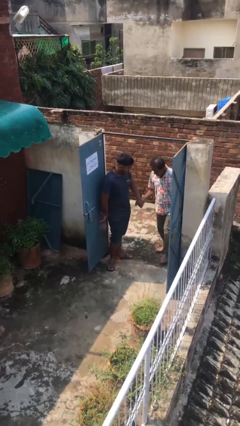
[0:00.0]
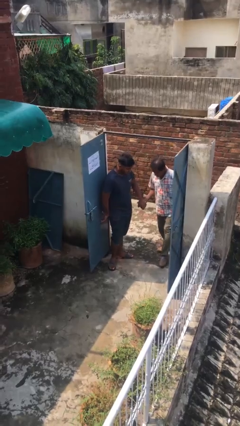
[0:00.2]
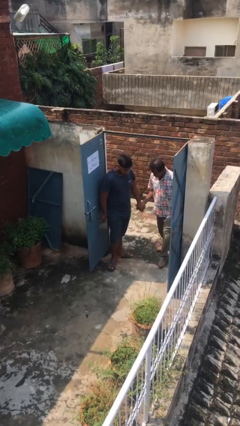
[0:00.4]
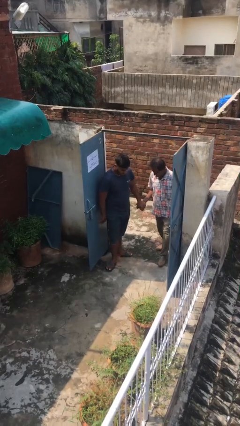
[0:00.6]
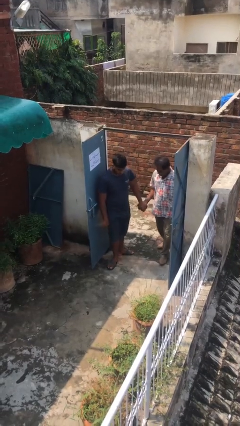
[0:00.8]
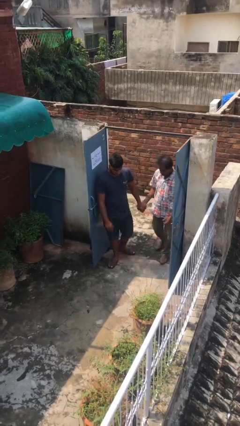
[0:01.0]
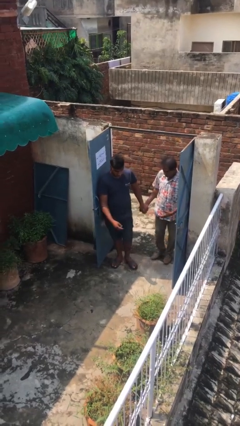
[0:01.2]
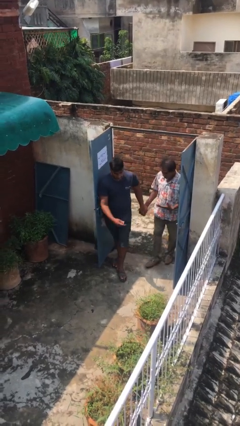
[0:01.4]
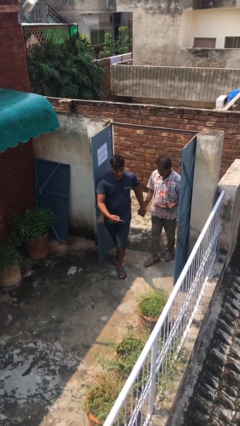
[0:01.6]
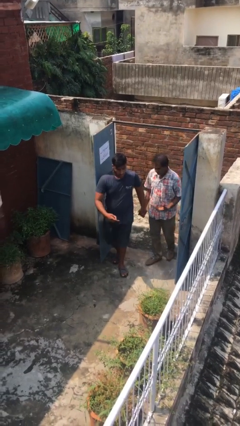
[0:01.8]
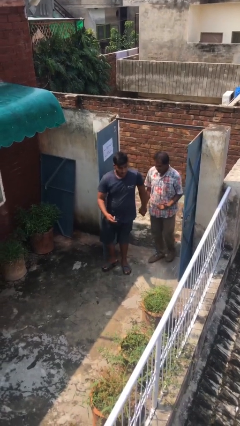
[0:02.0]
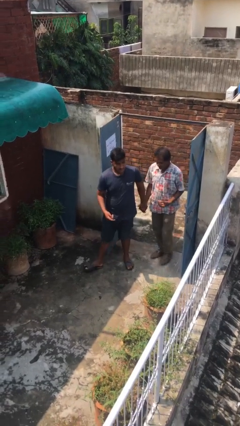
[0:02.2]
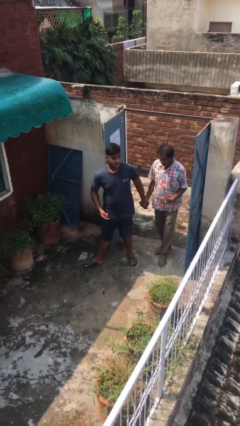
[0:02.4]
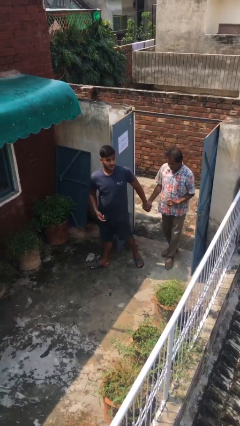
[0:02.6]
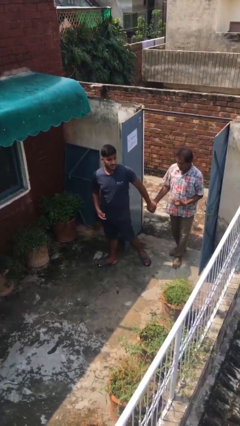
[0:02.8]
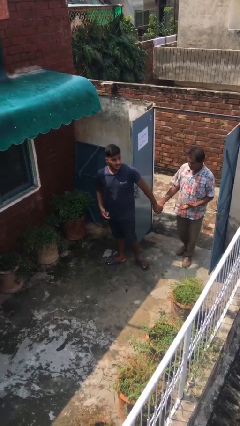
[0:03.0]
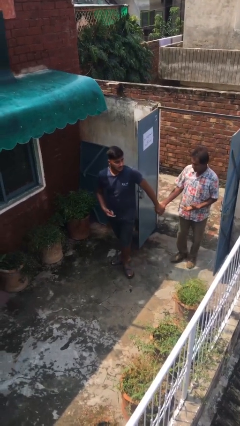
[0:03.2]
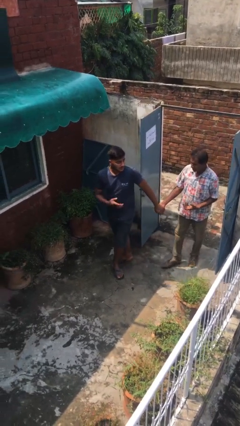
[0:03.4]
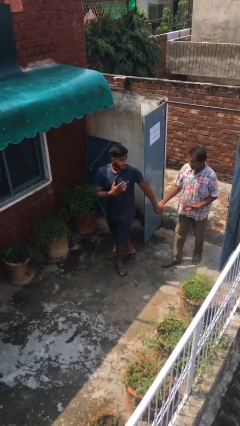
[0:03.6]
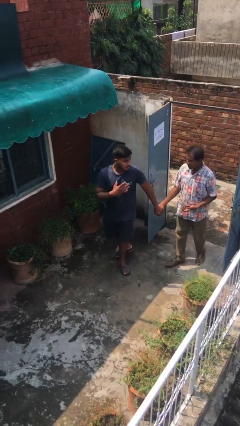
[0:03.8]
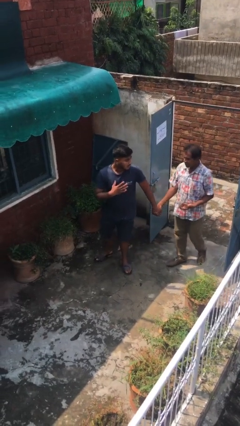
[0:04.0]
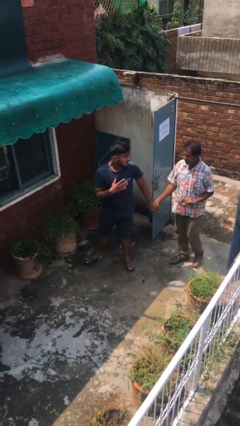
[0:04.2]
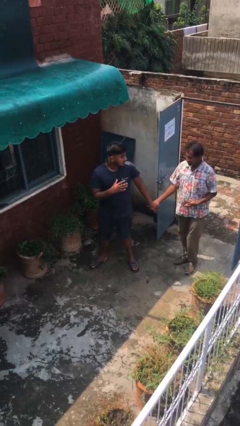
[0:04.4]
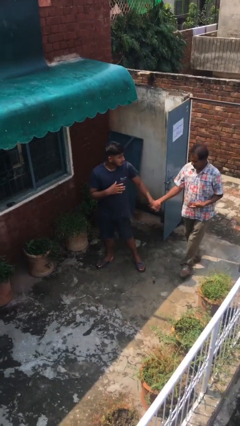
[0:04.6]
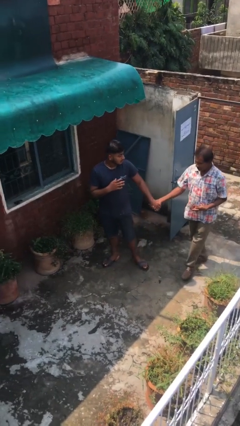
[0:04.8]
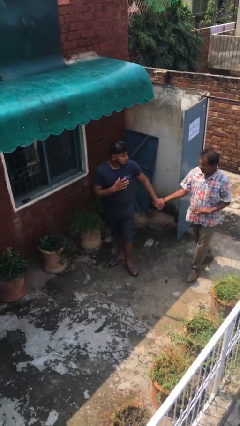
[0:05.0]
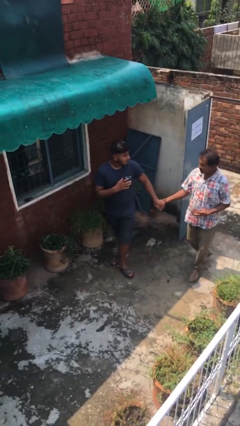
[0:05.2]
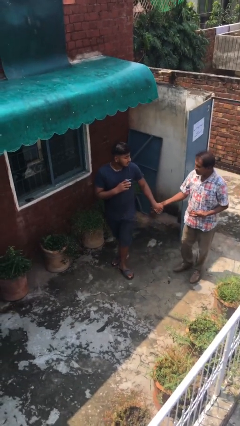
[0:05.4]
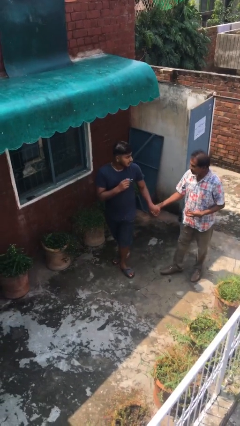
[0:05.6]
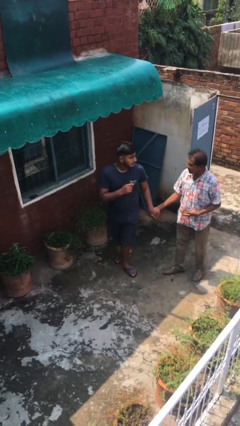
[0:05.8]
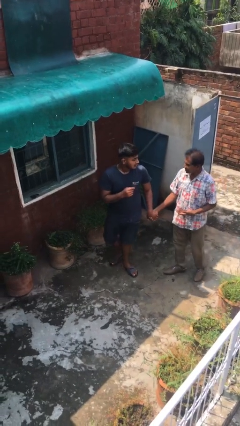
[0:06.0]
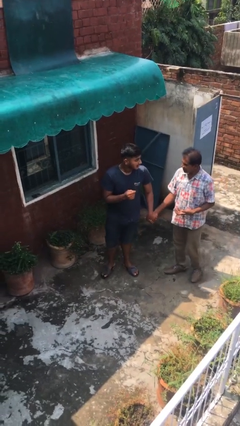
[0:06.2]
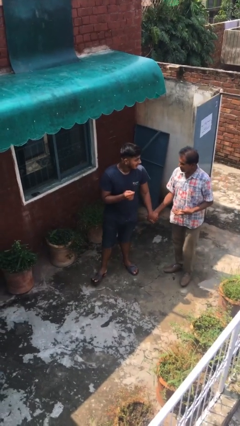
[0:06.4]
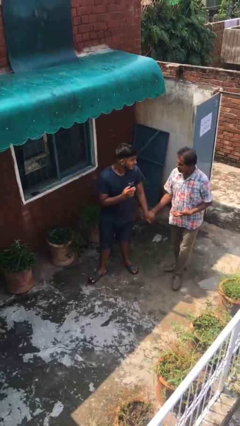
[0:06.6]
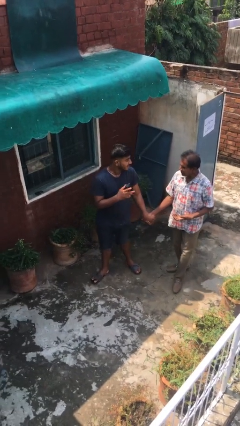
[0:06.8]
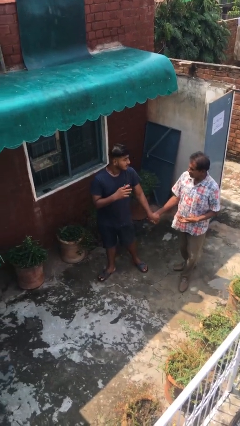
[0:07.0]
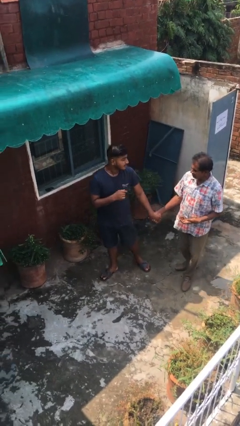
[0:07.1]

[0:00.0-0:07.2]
person holds hand

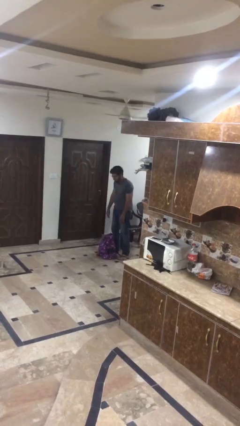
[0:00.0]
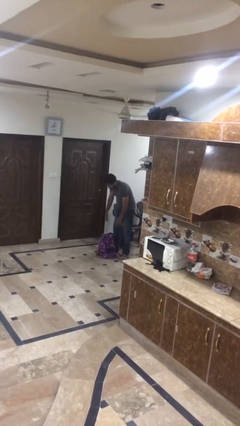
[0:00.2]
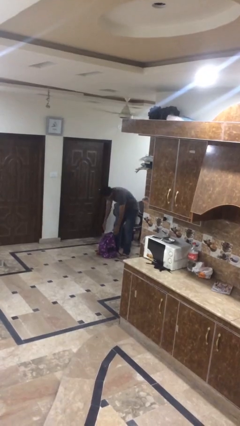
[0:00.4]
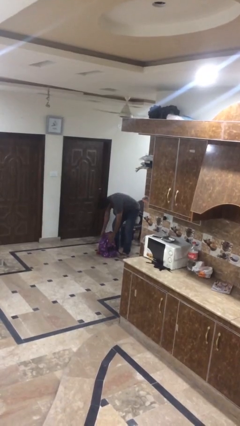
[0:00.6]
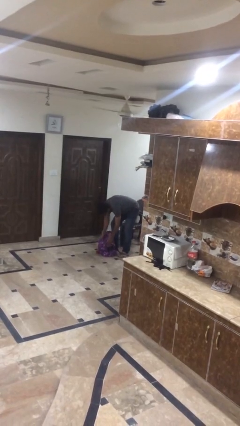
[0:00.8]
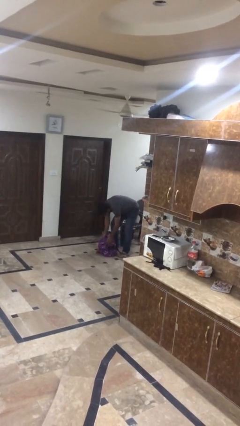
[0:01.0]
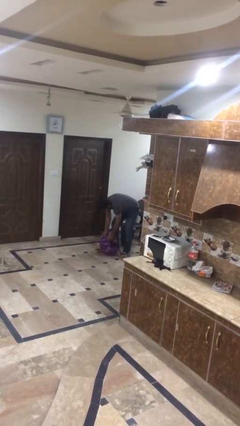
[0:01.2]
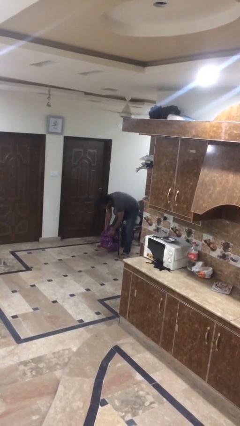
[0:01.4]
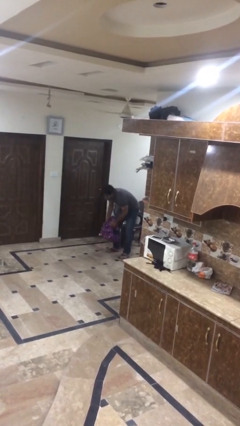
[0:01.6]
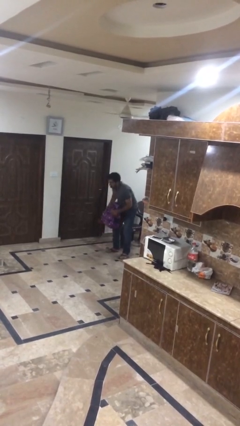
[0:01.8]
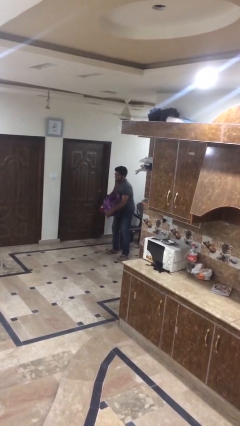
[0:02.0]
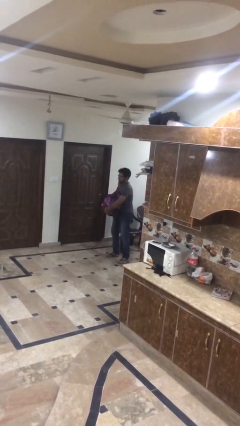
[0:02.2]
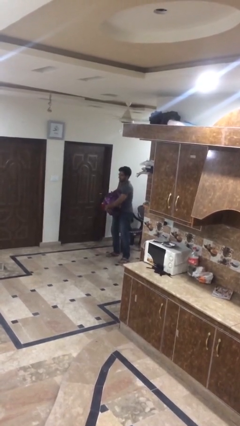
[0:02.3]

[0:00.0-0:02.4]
person picks up object from floor

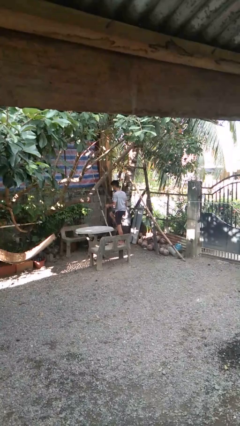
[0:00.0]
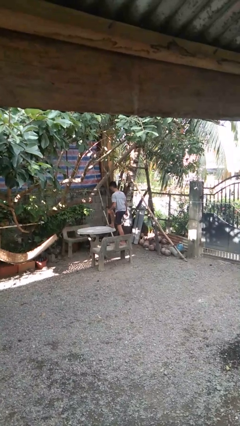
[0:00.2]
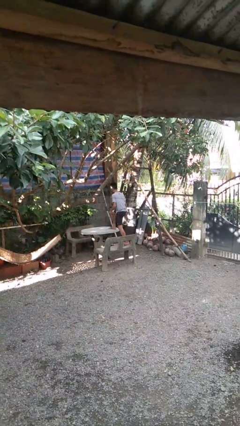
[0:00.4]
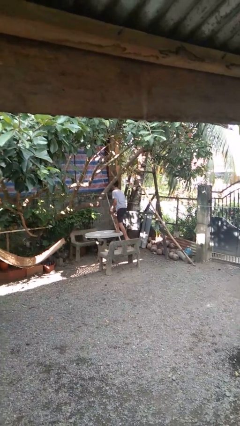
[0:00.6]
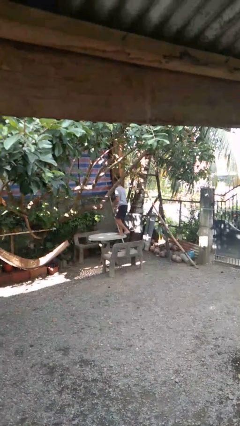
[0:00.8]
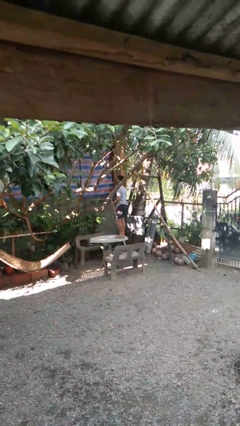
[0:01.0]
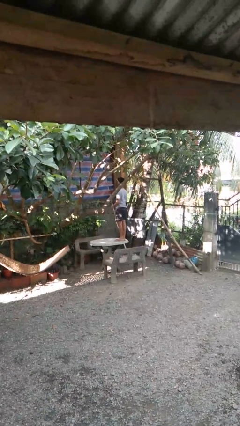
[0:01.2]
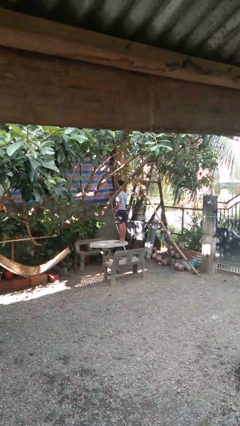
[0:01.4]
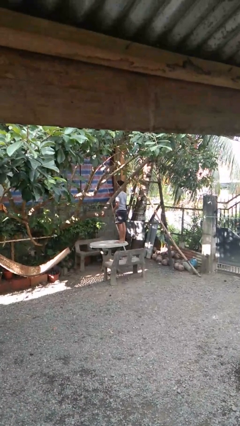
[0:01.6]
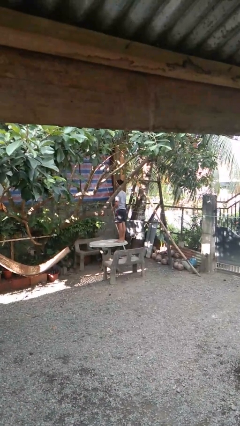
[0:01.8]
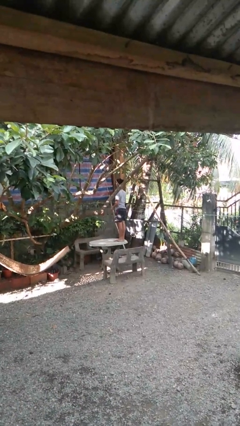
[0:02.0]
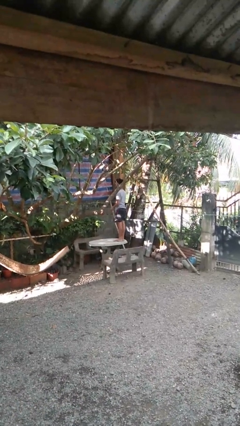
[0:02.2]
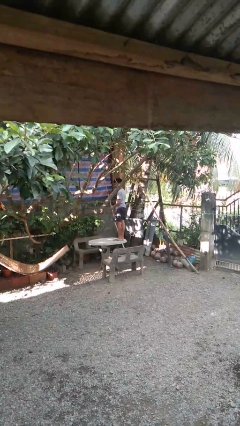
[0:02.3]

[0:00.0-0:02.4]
person climbs on table

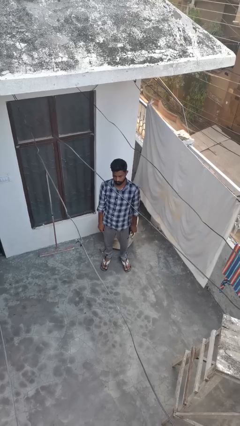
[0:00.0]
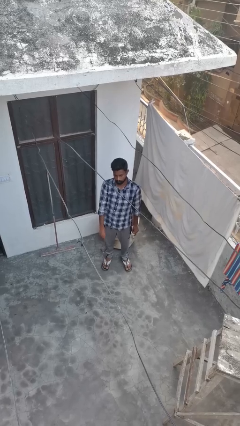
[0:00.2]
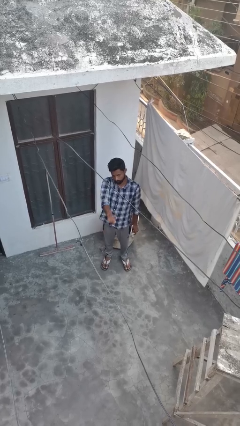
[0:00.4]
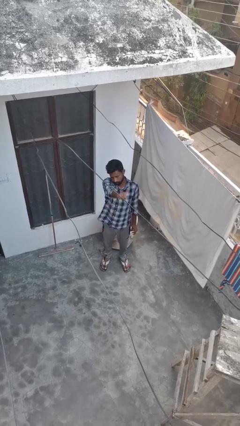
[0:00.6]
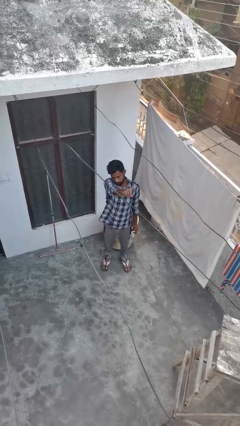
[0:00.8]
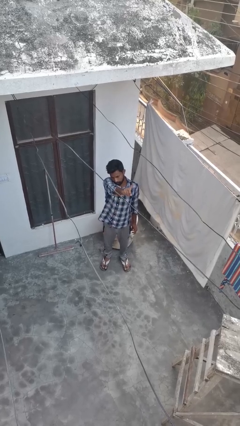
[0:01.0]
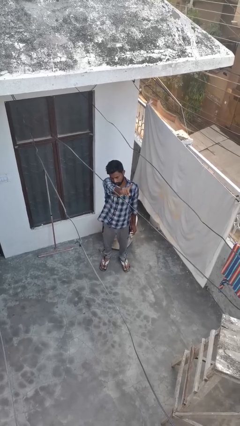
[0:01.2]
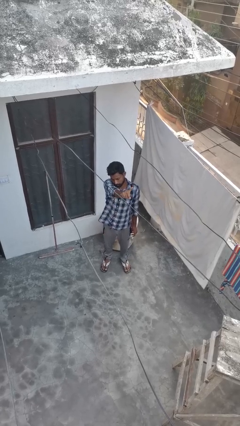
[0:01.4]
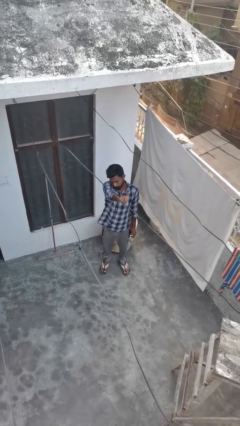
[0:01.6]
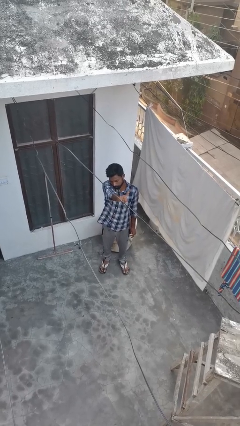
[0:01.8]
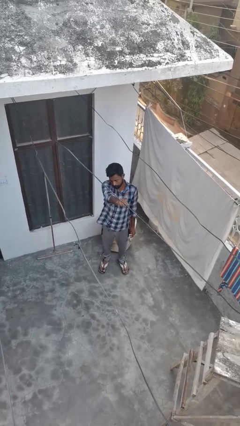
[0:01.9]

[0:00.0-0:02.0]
person gestures number one

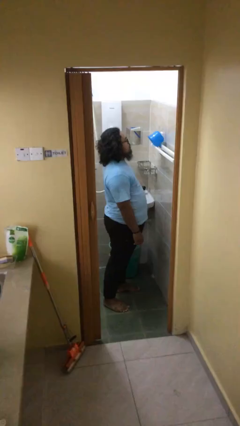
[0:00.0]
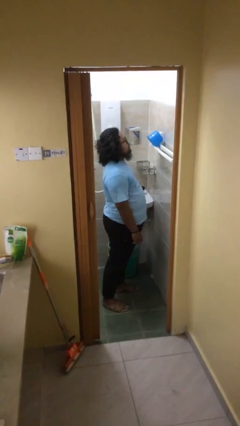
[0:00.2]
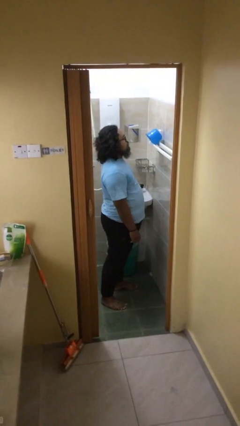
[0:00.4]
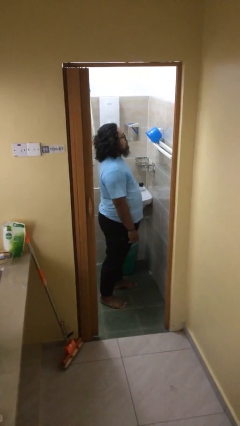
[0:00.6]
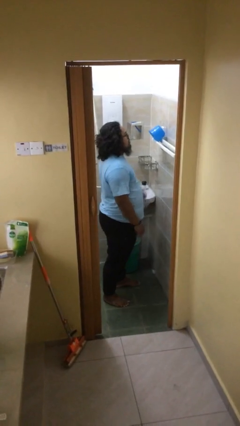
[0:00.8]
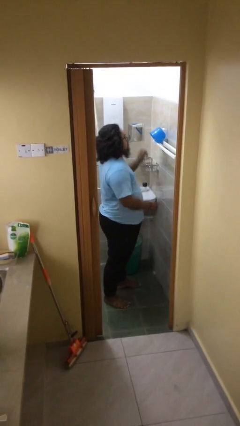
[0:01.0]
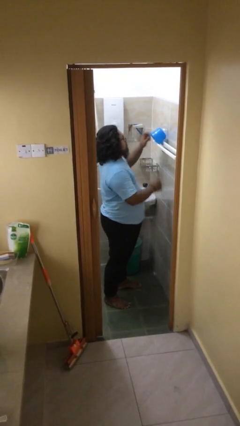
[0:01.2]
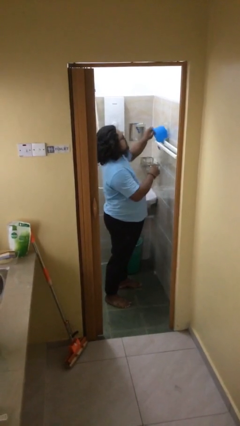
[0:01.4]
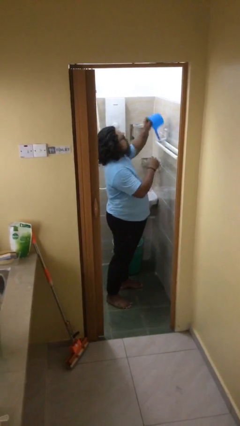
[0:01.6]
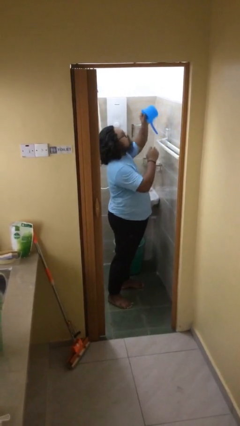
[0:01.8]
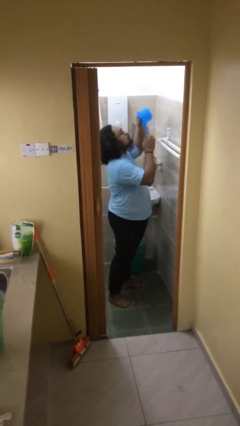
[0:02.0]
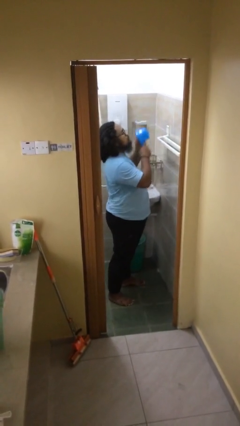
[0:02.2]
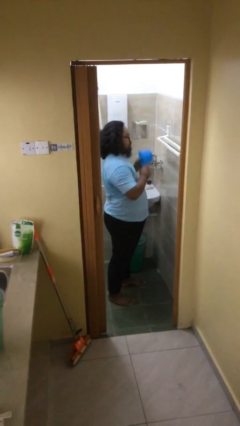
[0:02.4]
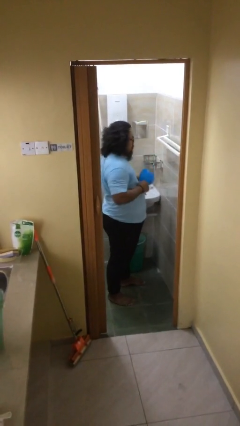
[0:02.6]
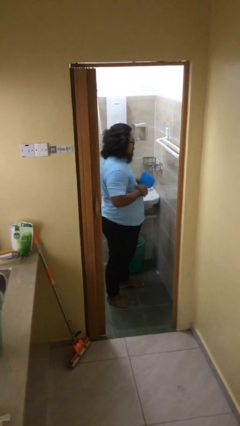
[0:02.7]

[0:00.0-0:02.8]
person picks up object from countertop

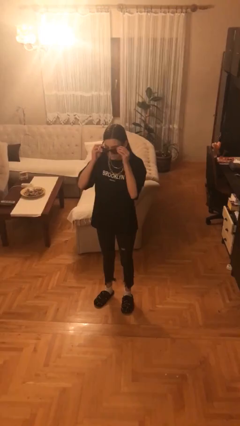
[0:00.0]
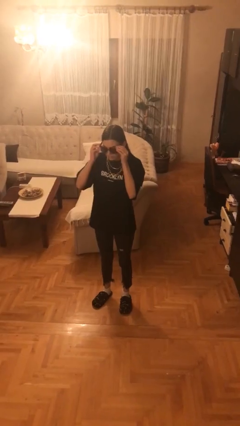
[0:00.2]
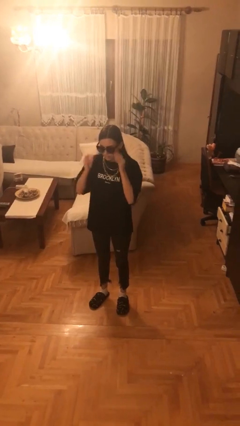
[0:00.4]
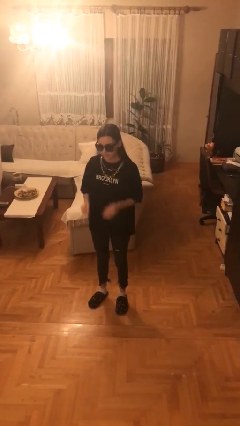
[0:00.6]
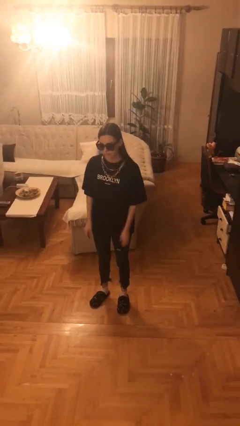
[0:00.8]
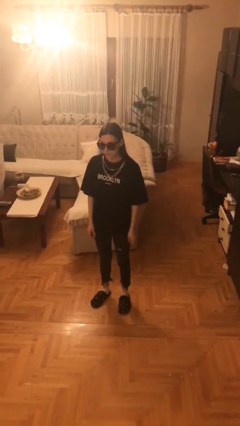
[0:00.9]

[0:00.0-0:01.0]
person puts on sunglasses
